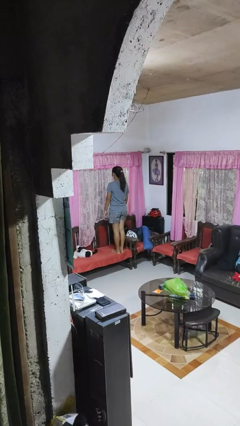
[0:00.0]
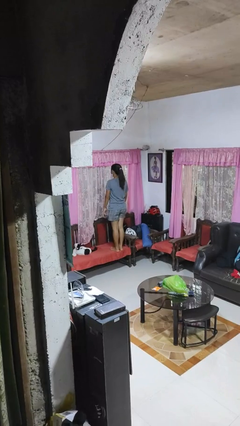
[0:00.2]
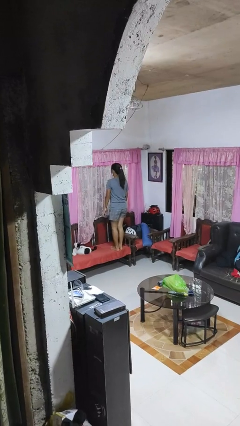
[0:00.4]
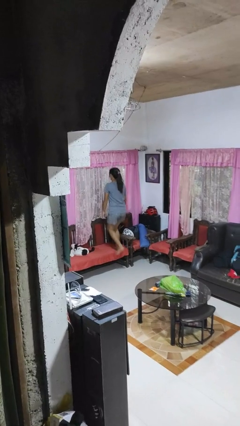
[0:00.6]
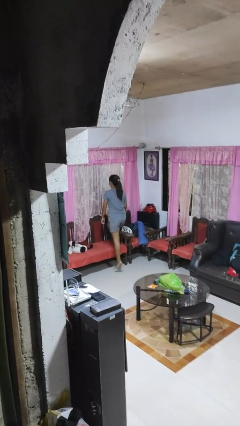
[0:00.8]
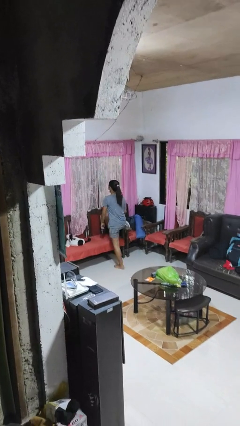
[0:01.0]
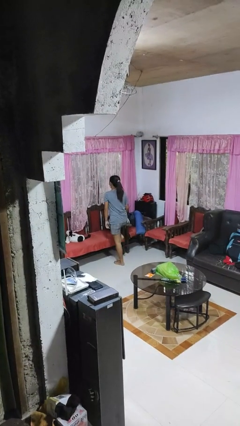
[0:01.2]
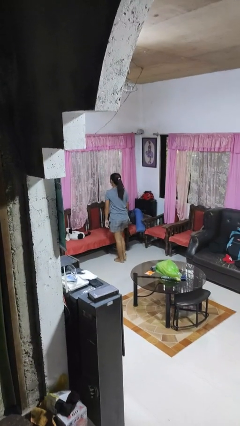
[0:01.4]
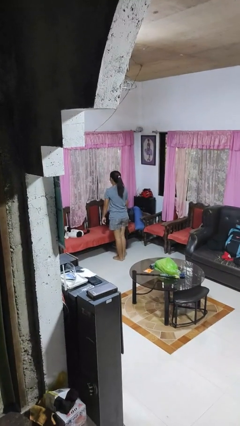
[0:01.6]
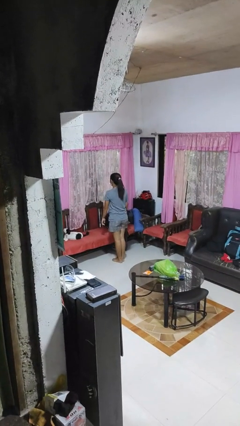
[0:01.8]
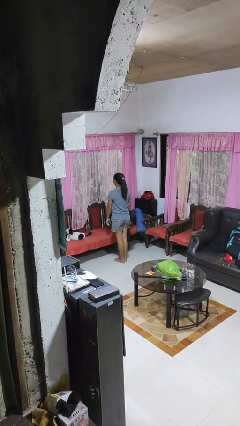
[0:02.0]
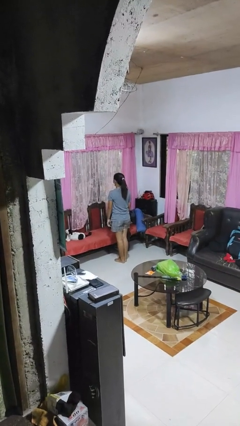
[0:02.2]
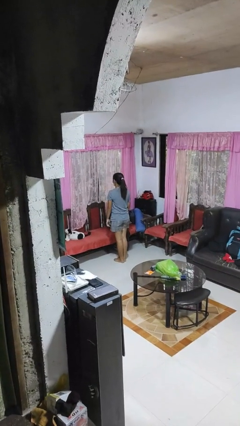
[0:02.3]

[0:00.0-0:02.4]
person climbs off chair

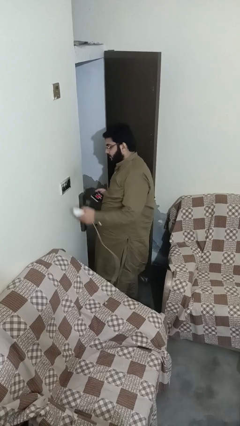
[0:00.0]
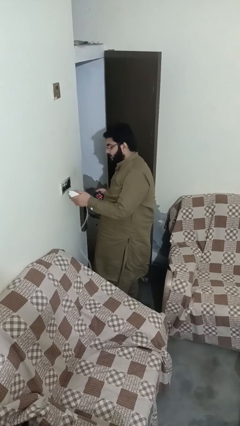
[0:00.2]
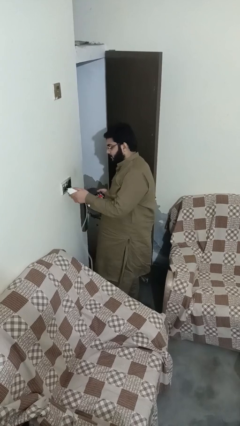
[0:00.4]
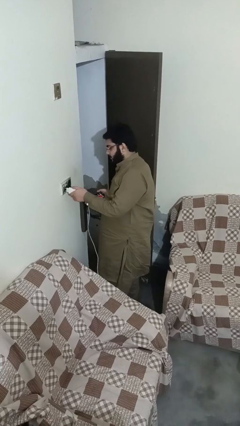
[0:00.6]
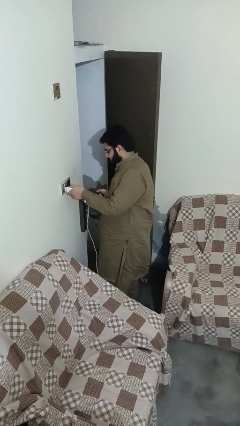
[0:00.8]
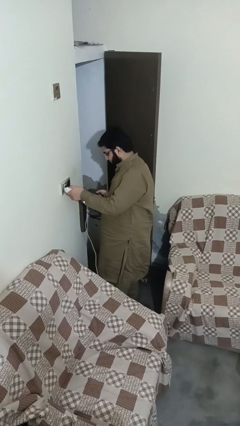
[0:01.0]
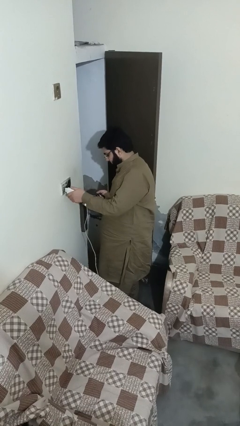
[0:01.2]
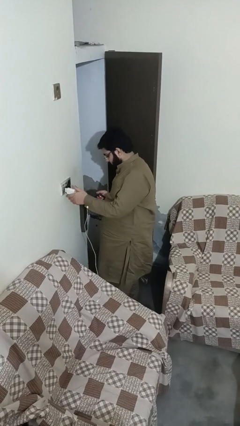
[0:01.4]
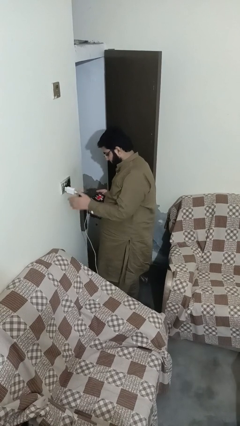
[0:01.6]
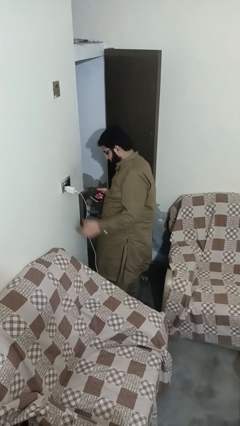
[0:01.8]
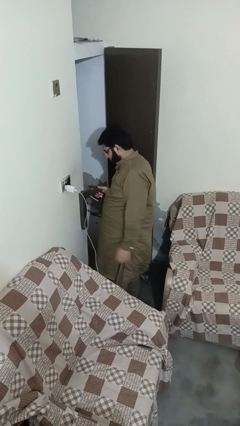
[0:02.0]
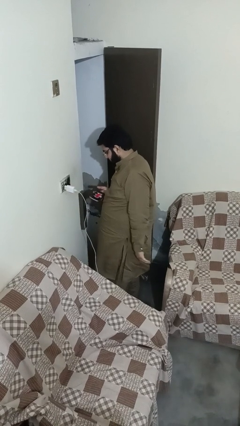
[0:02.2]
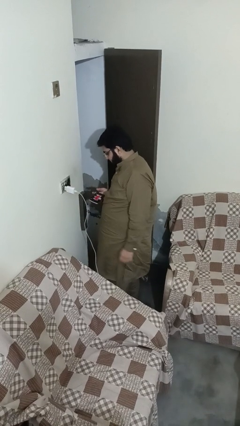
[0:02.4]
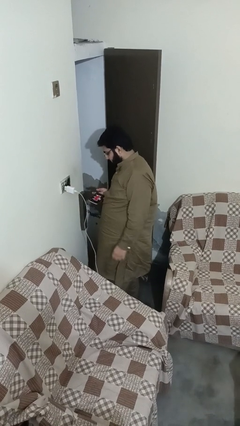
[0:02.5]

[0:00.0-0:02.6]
person plugs into electrical socket

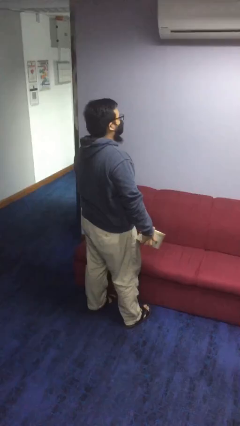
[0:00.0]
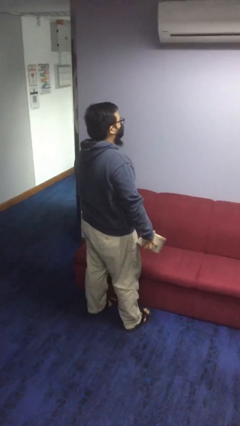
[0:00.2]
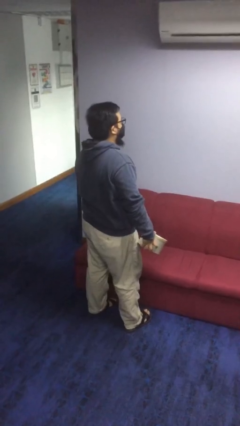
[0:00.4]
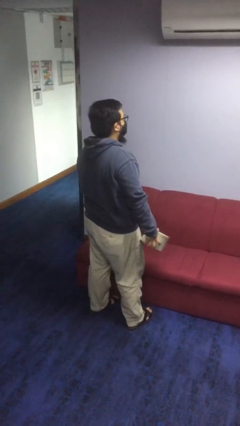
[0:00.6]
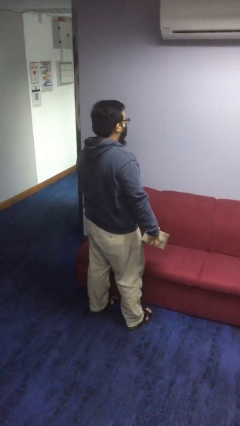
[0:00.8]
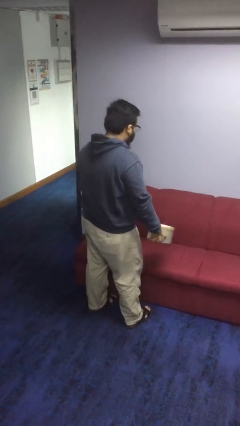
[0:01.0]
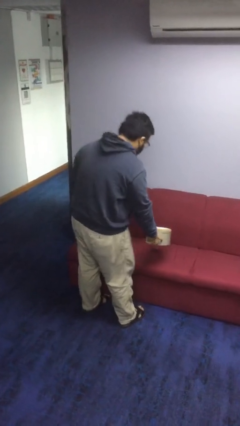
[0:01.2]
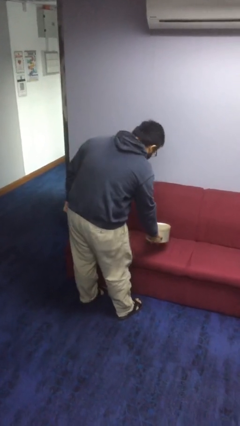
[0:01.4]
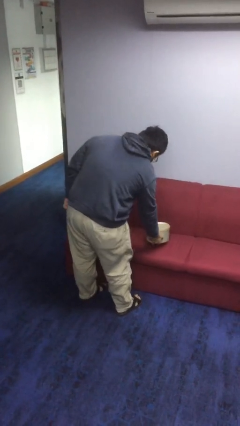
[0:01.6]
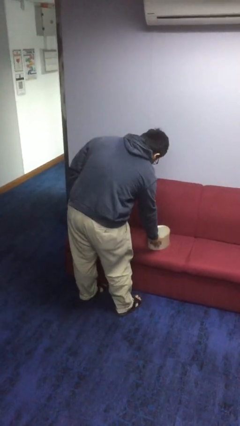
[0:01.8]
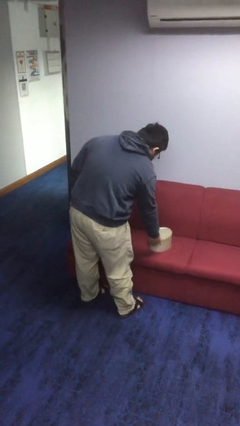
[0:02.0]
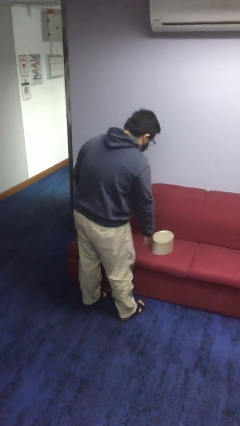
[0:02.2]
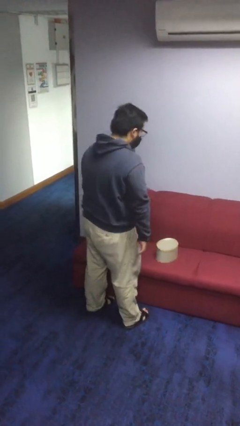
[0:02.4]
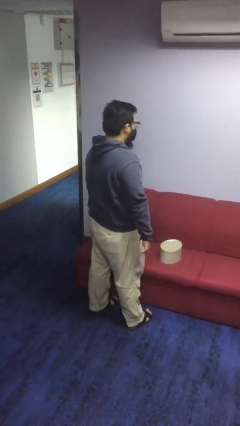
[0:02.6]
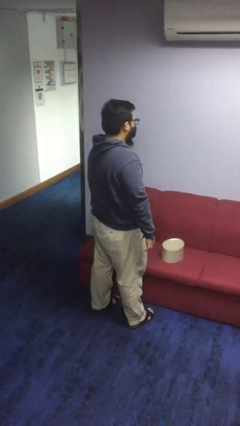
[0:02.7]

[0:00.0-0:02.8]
person puts down object on couch

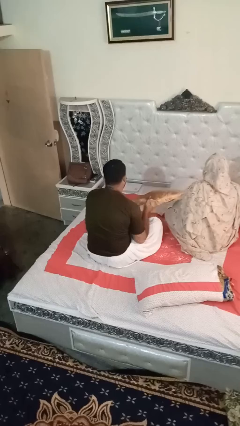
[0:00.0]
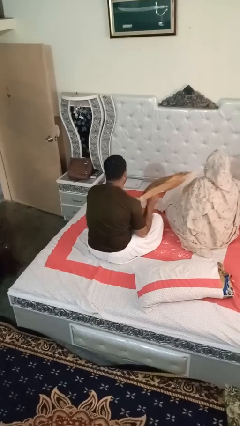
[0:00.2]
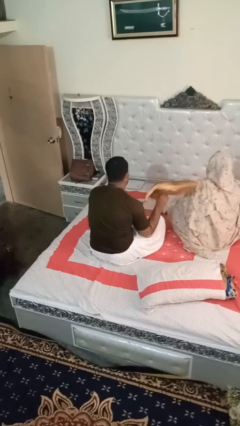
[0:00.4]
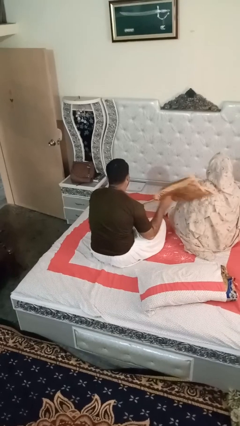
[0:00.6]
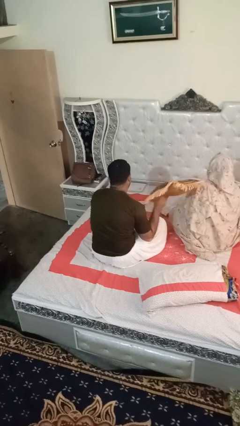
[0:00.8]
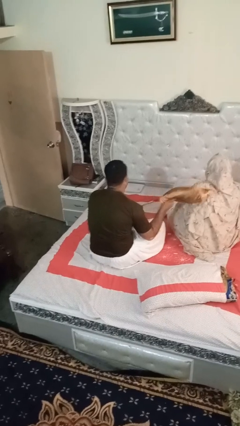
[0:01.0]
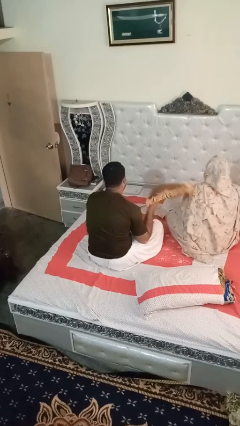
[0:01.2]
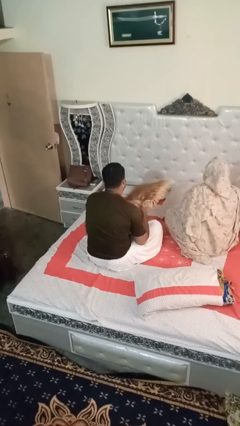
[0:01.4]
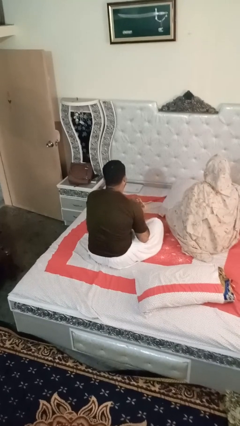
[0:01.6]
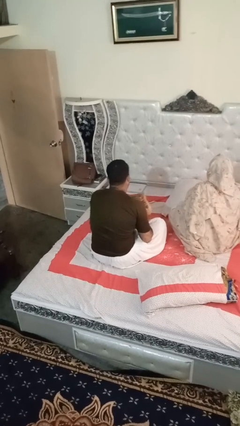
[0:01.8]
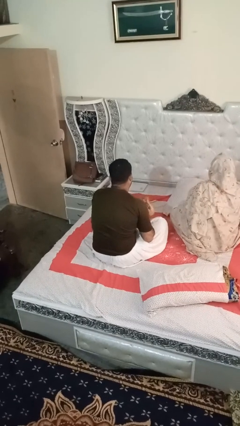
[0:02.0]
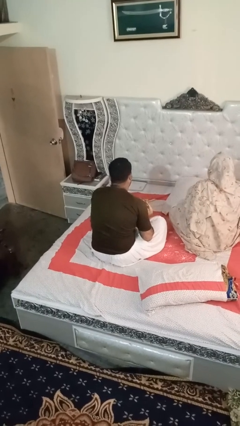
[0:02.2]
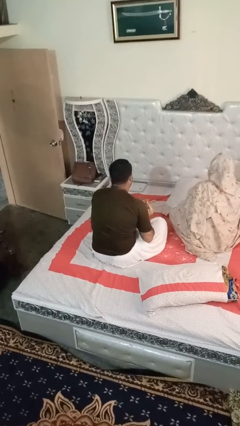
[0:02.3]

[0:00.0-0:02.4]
person hits person with pillow

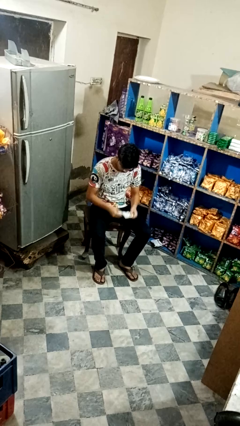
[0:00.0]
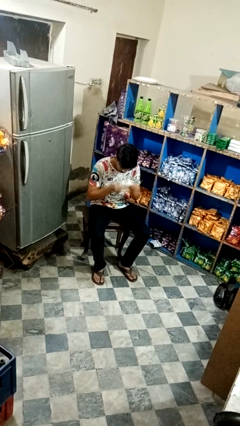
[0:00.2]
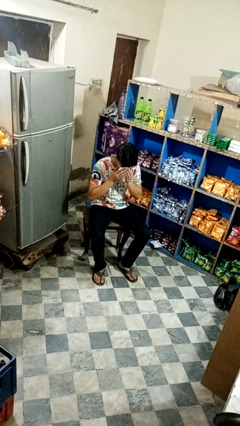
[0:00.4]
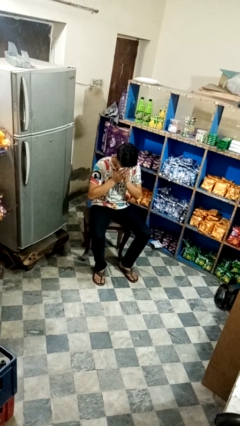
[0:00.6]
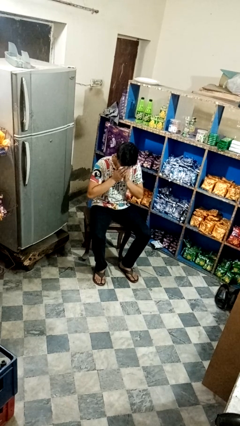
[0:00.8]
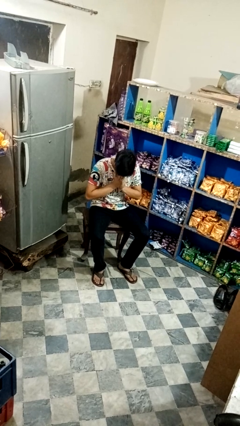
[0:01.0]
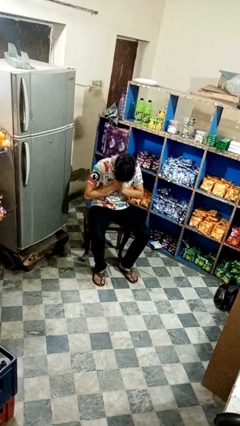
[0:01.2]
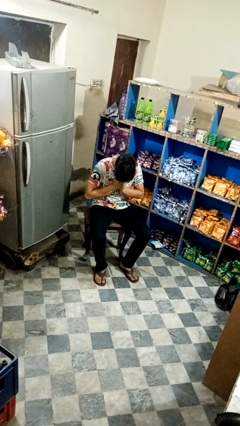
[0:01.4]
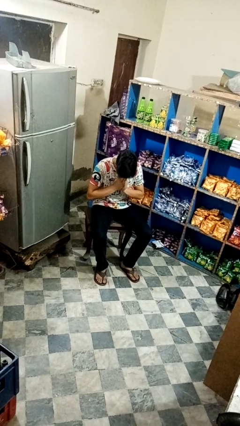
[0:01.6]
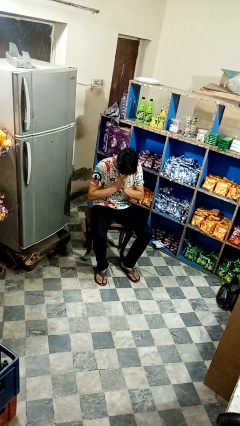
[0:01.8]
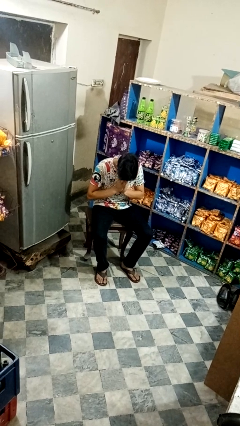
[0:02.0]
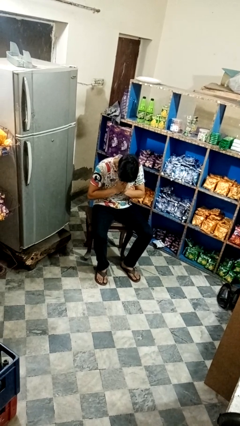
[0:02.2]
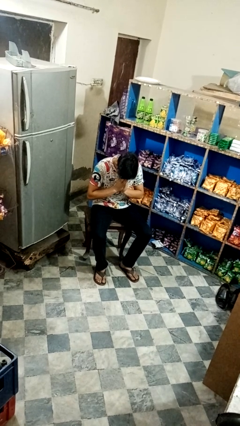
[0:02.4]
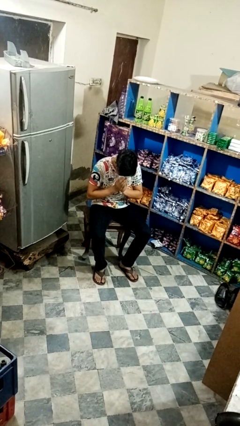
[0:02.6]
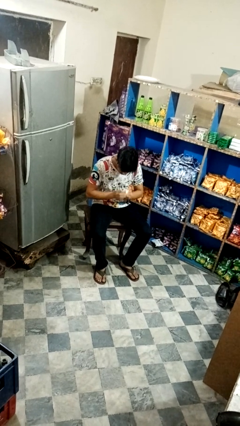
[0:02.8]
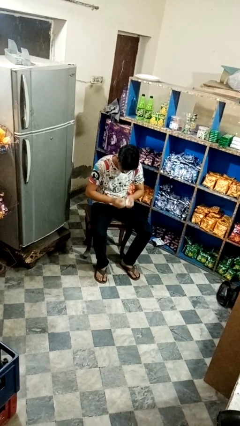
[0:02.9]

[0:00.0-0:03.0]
person blows nose

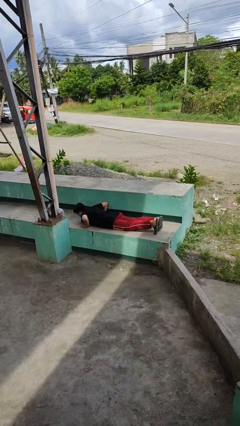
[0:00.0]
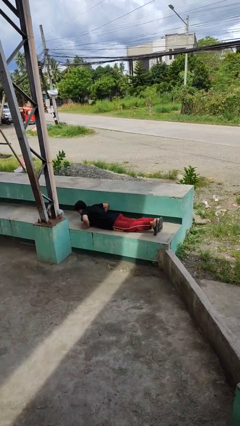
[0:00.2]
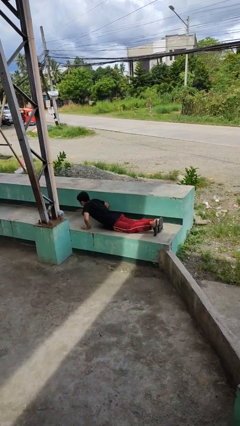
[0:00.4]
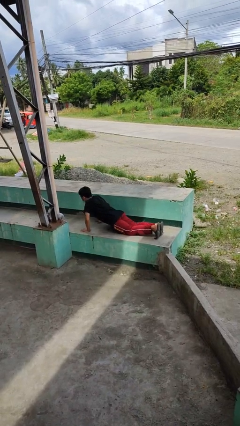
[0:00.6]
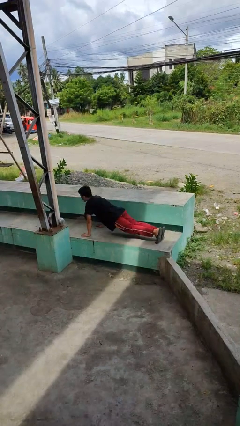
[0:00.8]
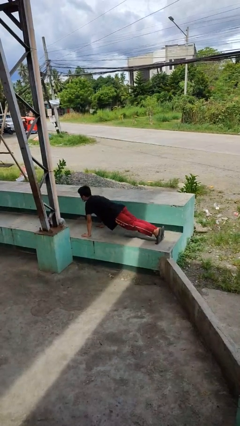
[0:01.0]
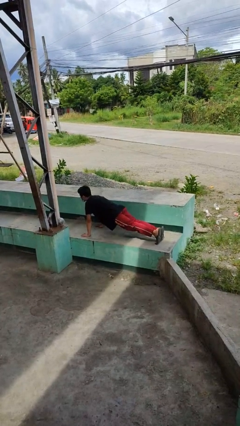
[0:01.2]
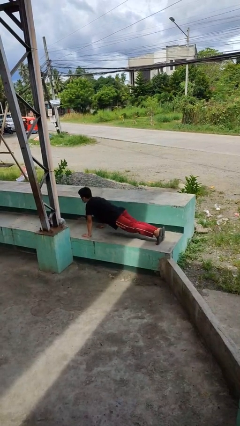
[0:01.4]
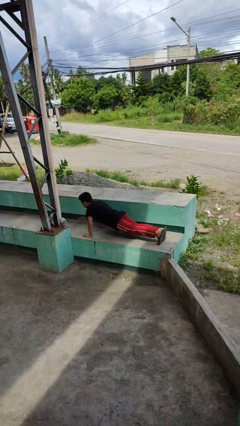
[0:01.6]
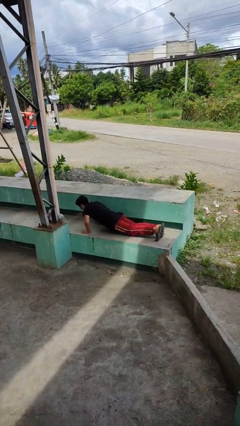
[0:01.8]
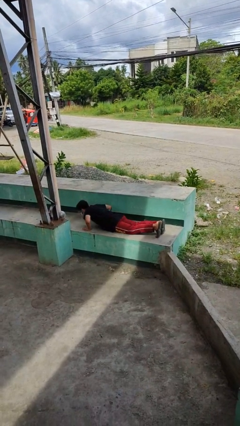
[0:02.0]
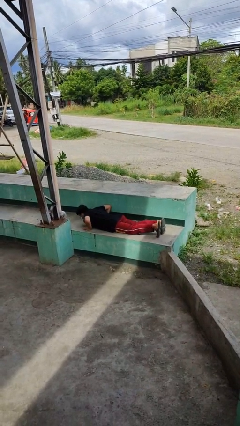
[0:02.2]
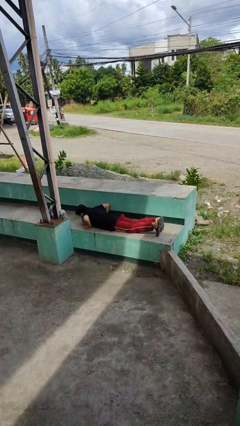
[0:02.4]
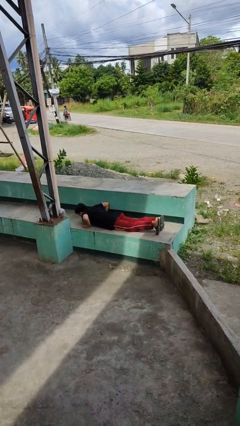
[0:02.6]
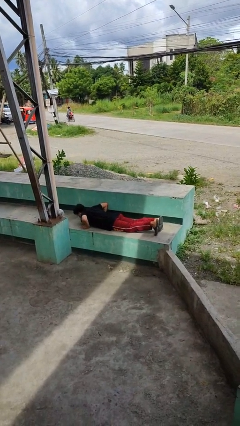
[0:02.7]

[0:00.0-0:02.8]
person exercises with pushup

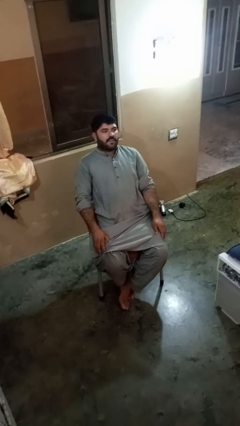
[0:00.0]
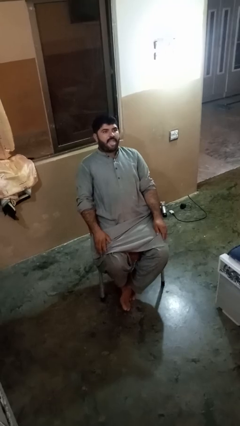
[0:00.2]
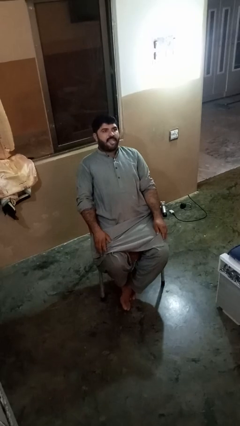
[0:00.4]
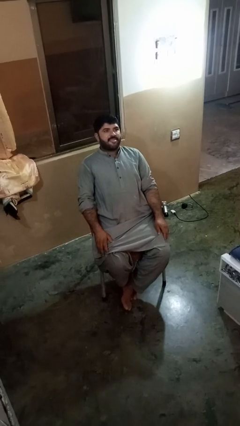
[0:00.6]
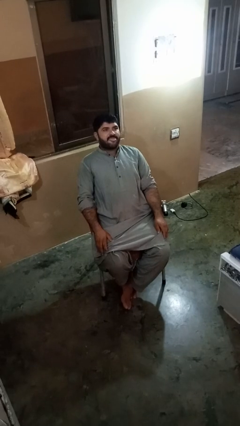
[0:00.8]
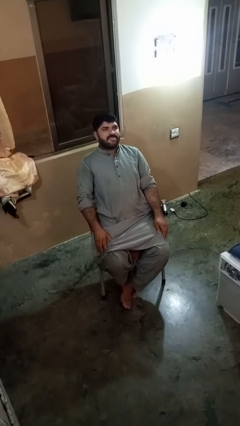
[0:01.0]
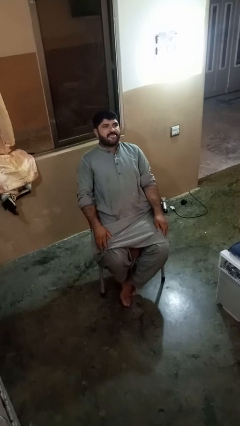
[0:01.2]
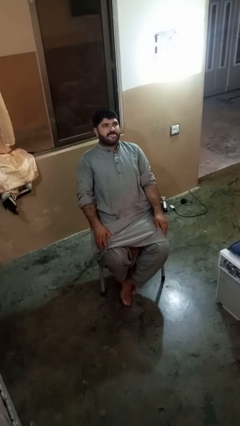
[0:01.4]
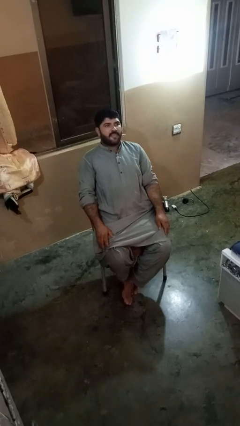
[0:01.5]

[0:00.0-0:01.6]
person sticks out tongue
